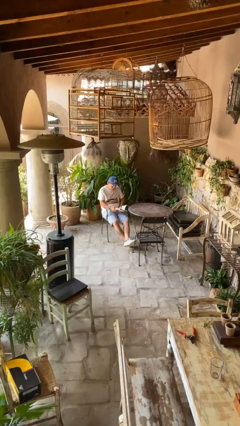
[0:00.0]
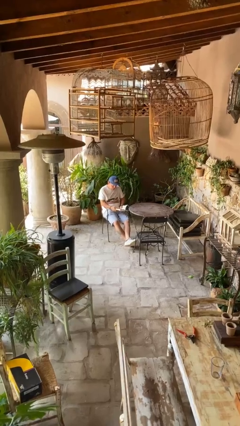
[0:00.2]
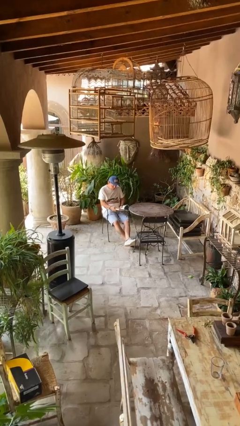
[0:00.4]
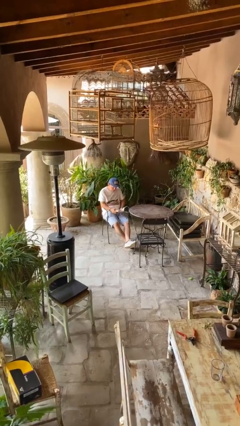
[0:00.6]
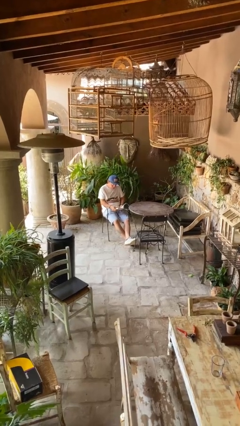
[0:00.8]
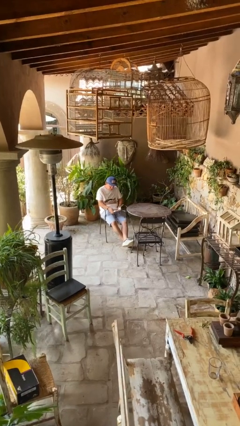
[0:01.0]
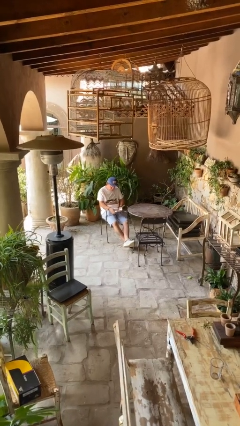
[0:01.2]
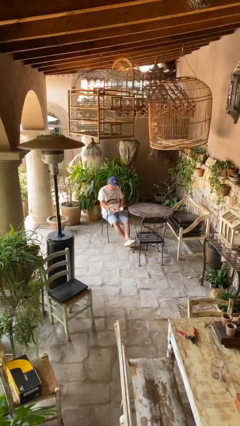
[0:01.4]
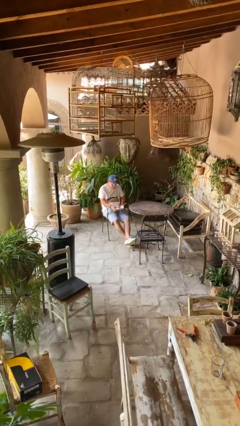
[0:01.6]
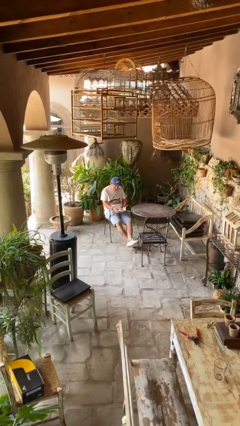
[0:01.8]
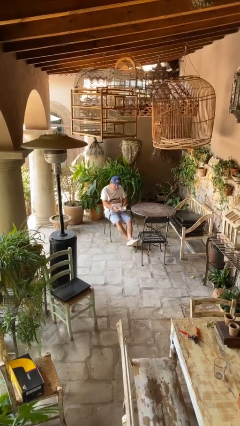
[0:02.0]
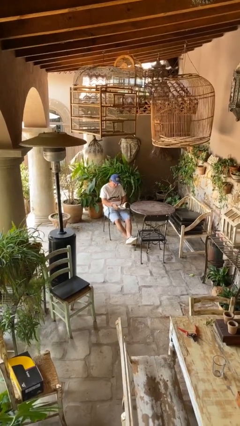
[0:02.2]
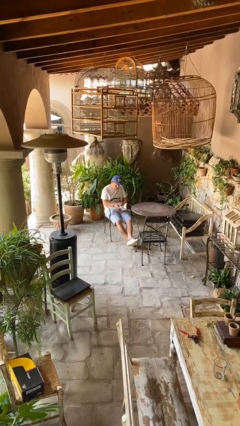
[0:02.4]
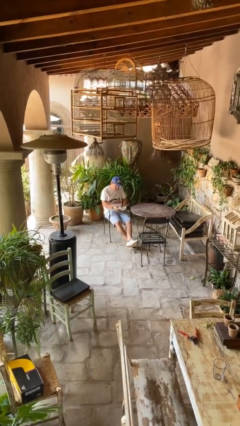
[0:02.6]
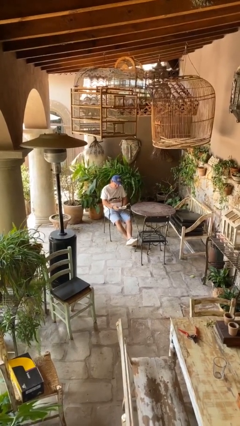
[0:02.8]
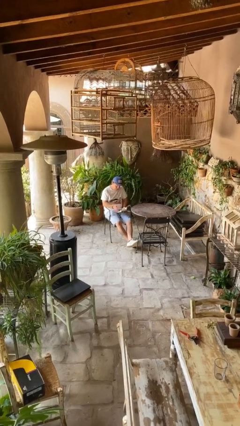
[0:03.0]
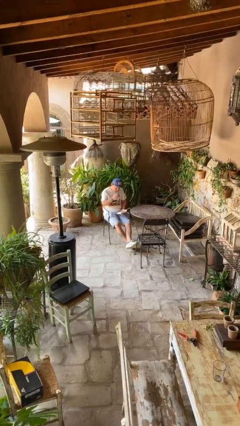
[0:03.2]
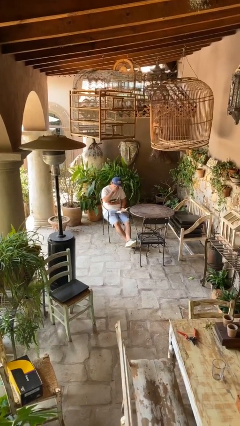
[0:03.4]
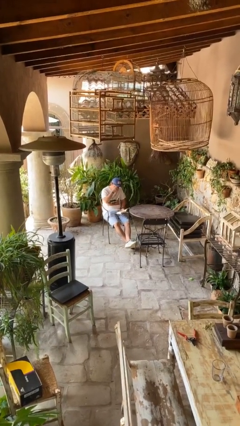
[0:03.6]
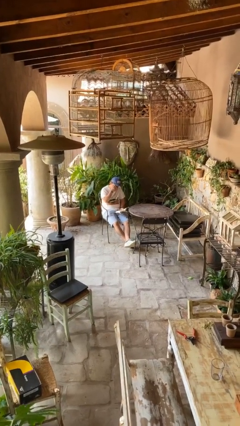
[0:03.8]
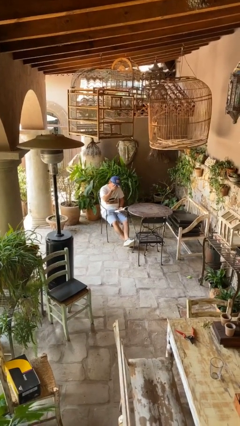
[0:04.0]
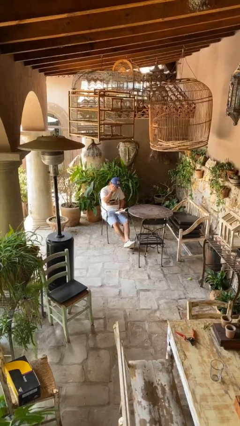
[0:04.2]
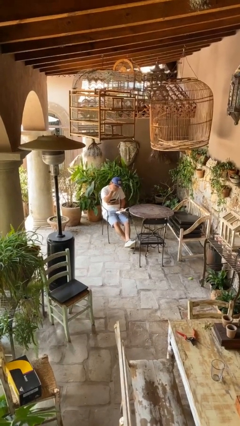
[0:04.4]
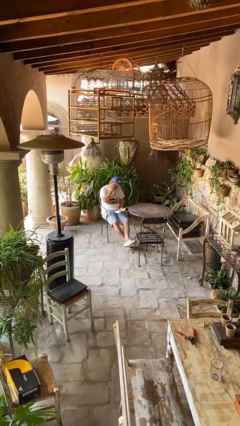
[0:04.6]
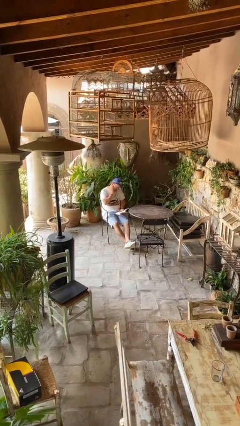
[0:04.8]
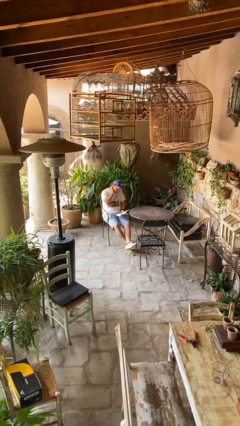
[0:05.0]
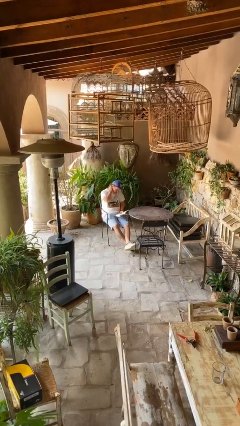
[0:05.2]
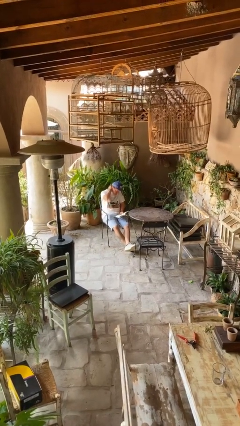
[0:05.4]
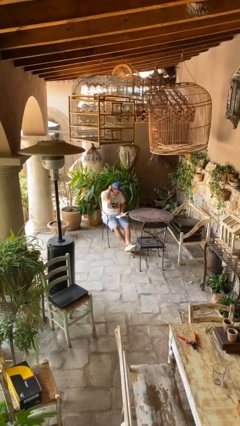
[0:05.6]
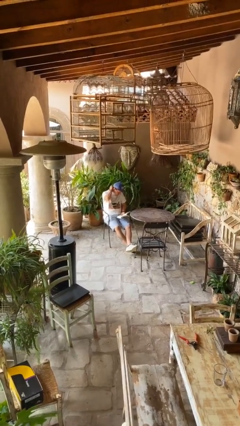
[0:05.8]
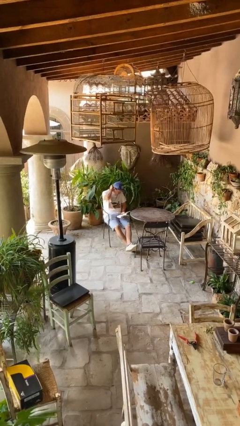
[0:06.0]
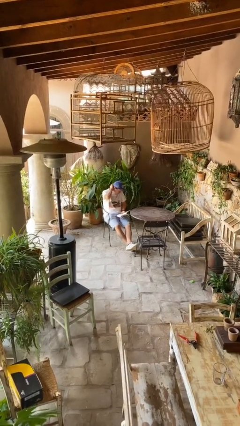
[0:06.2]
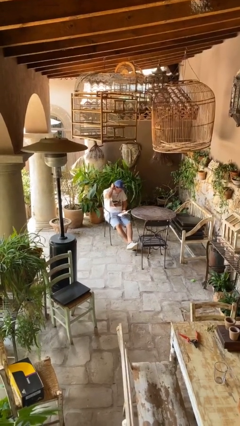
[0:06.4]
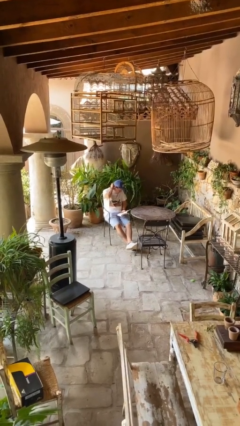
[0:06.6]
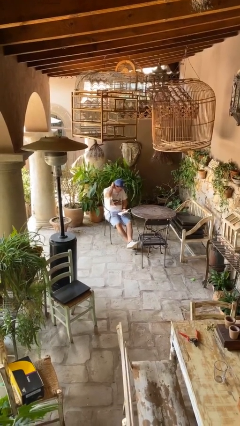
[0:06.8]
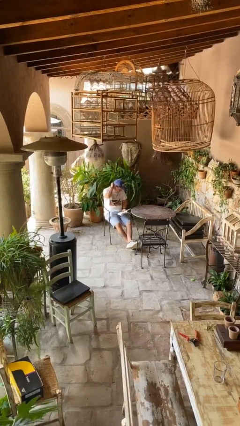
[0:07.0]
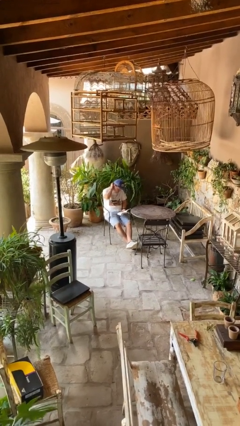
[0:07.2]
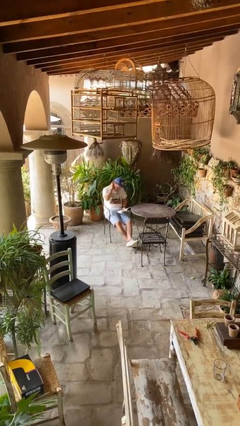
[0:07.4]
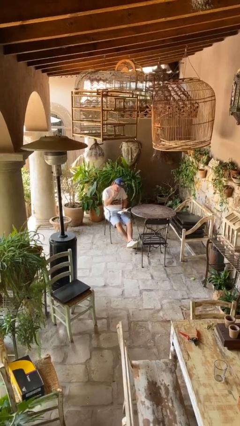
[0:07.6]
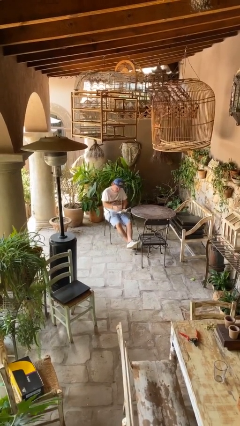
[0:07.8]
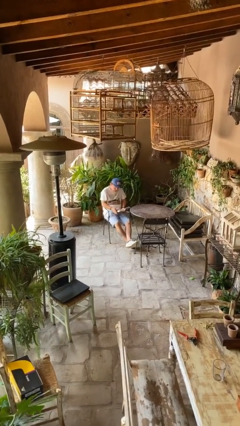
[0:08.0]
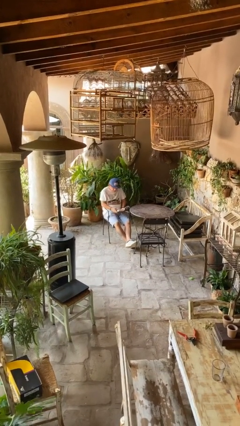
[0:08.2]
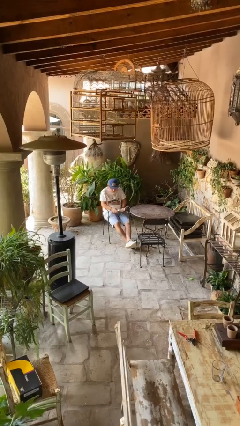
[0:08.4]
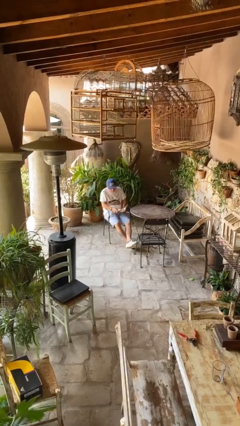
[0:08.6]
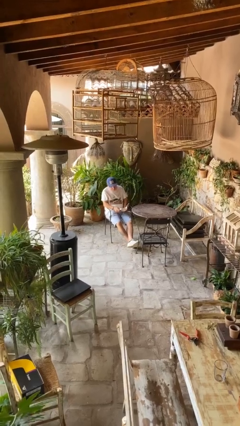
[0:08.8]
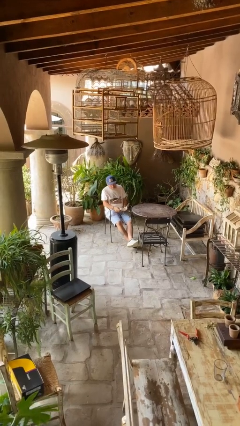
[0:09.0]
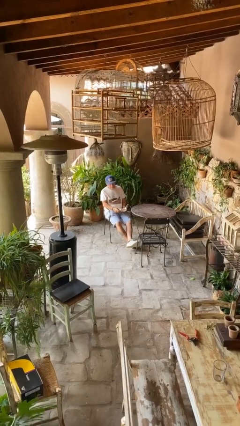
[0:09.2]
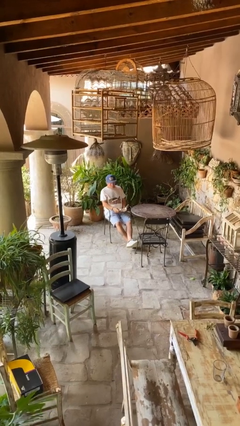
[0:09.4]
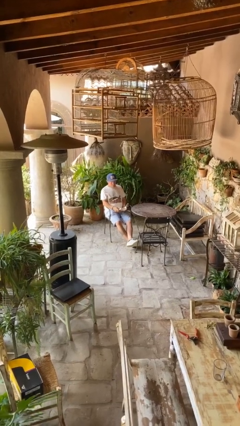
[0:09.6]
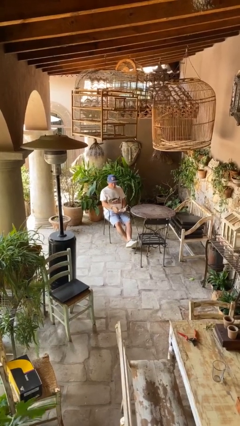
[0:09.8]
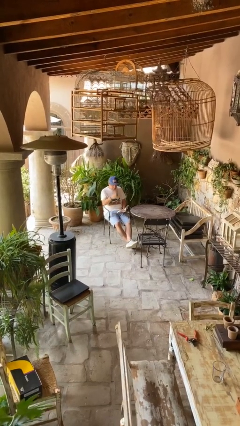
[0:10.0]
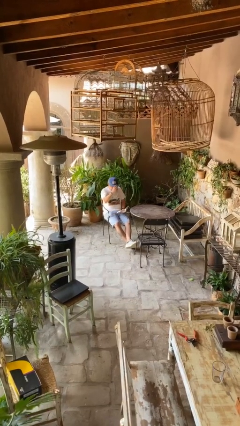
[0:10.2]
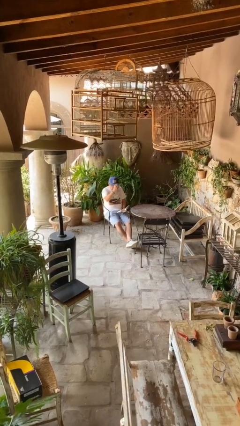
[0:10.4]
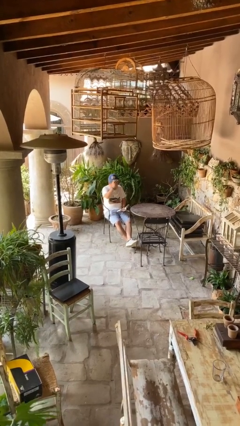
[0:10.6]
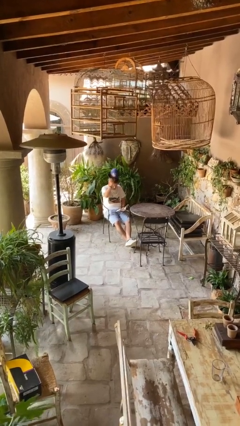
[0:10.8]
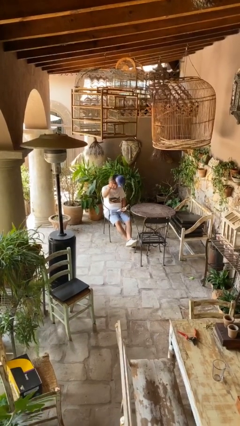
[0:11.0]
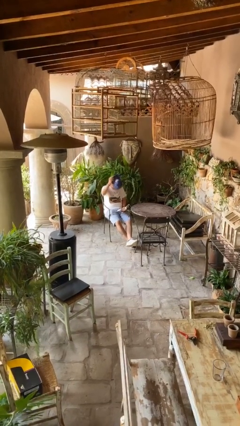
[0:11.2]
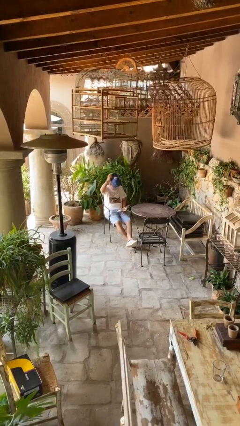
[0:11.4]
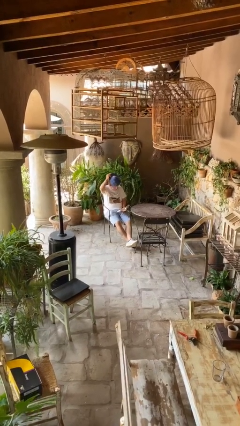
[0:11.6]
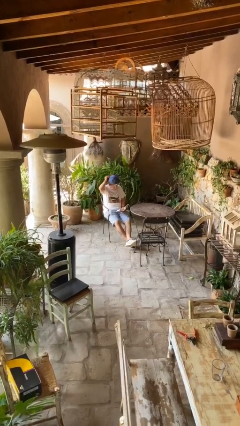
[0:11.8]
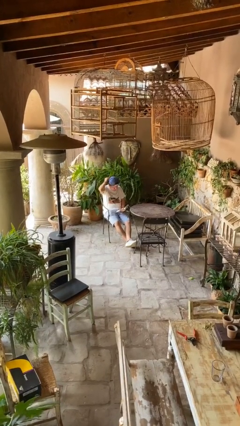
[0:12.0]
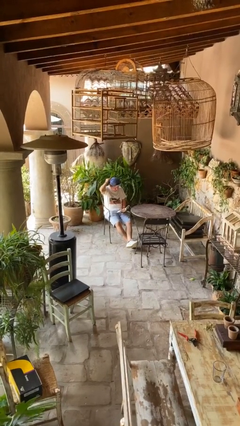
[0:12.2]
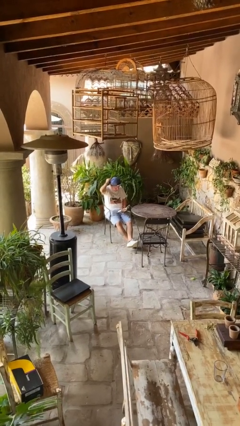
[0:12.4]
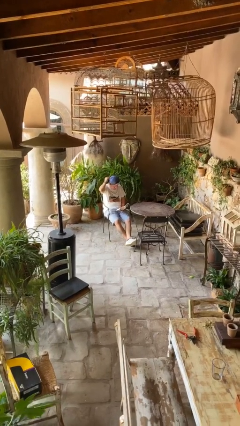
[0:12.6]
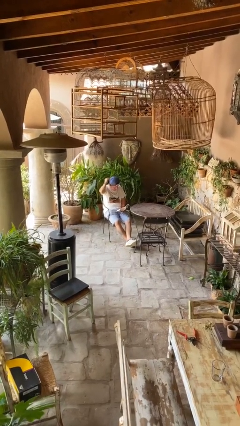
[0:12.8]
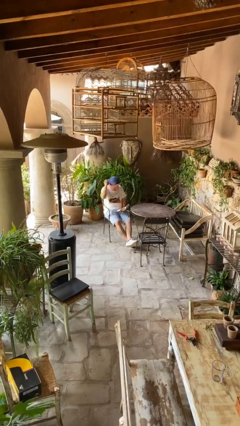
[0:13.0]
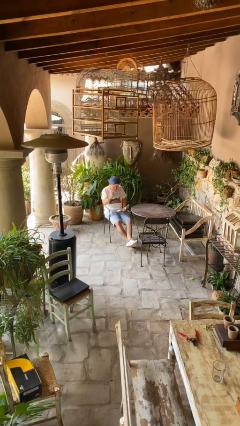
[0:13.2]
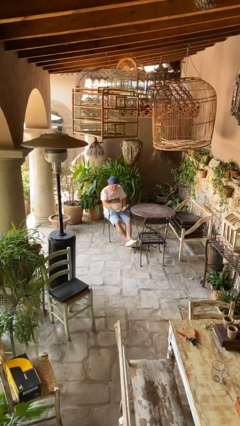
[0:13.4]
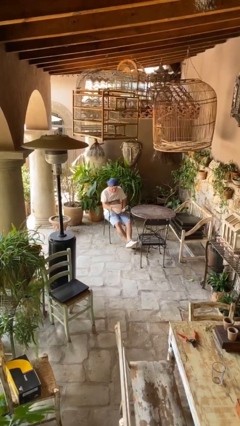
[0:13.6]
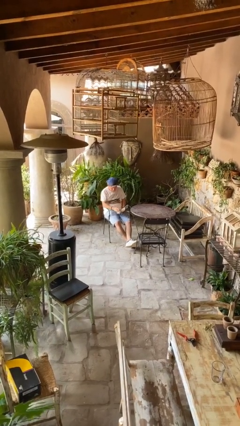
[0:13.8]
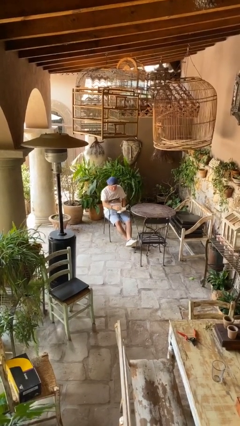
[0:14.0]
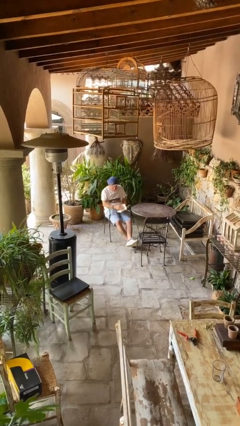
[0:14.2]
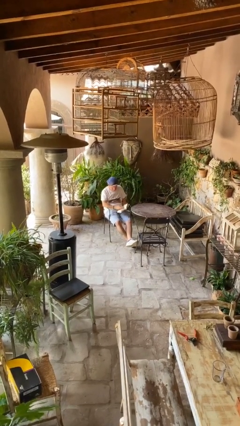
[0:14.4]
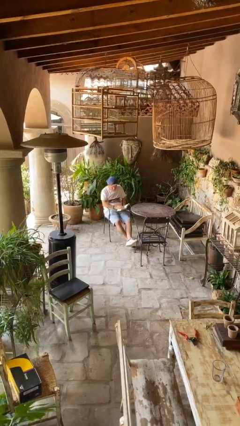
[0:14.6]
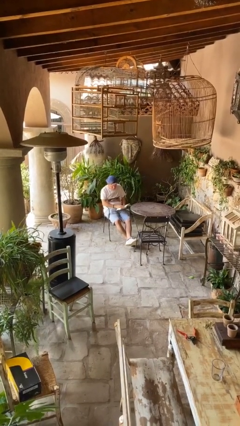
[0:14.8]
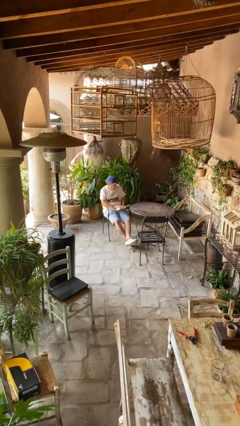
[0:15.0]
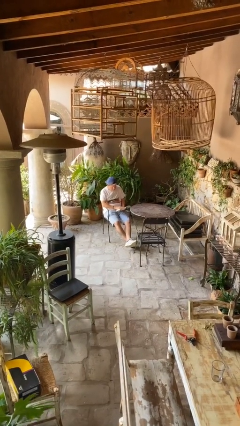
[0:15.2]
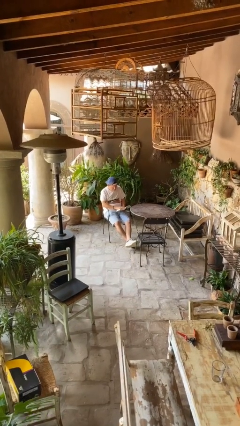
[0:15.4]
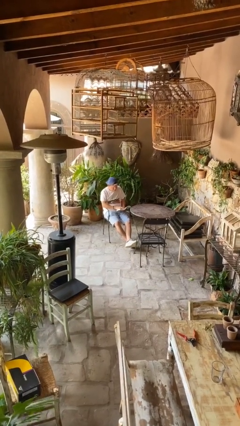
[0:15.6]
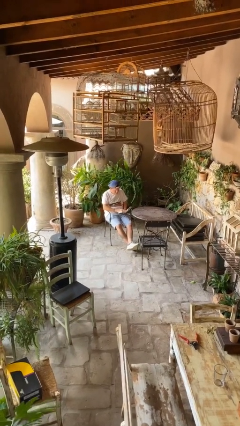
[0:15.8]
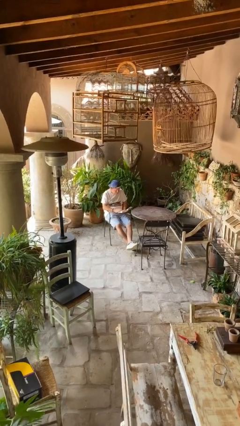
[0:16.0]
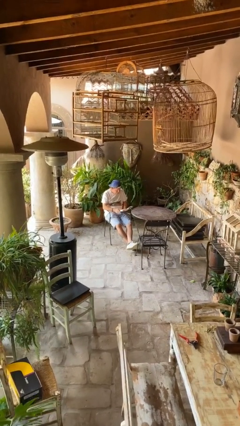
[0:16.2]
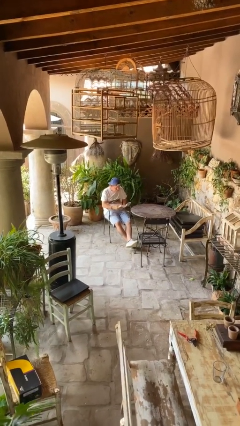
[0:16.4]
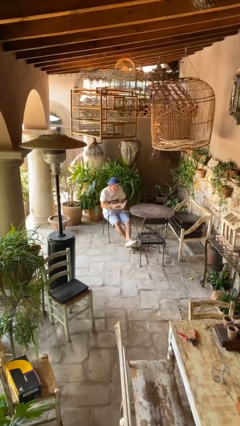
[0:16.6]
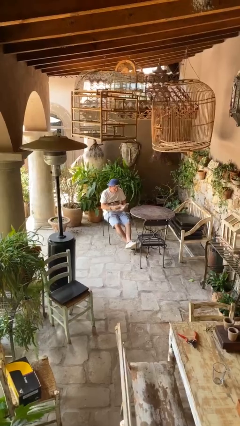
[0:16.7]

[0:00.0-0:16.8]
person reads document

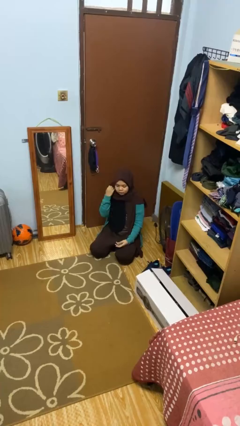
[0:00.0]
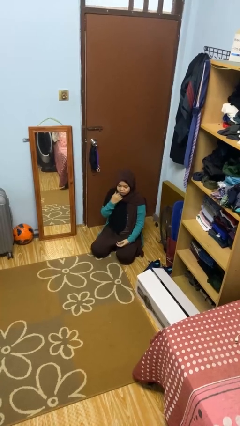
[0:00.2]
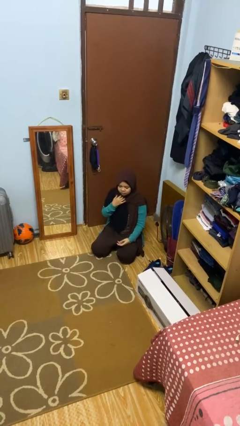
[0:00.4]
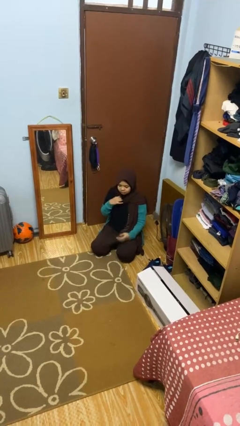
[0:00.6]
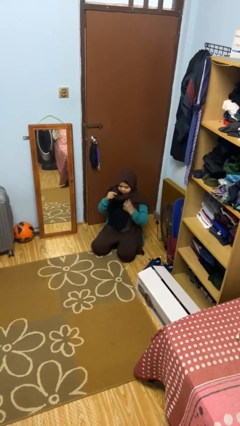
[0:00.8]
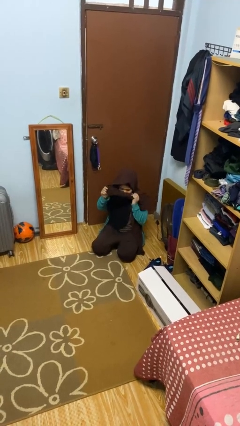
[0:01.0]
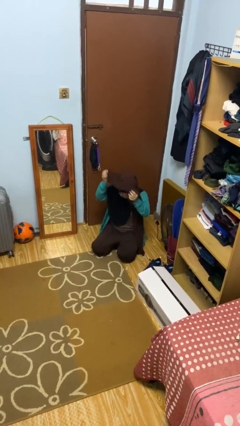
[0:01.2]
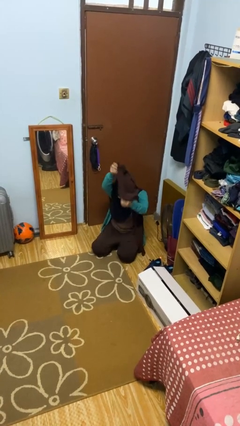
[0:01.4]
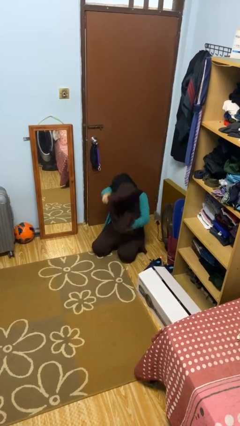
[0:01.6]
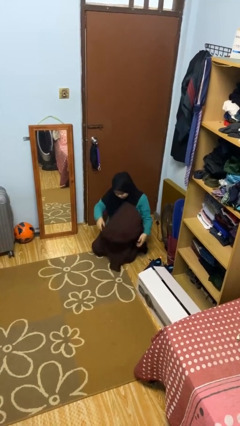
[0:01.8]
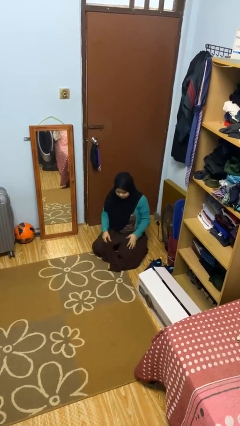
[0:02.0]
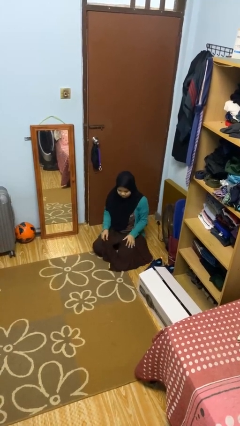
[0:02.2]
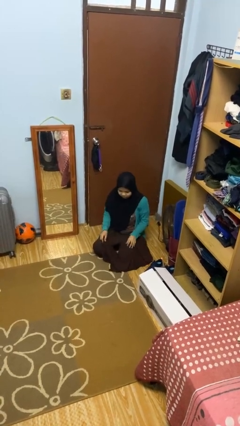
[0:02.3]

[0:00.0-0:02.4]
person takes off scarf
